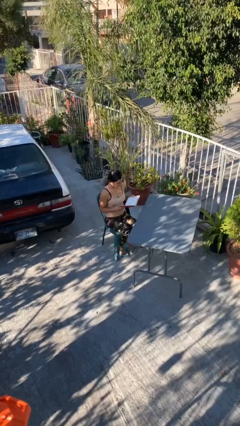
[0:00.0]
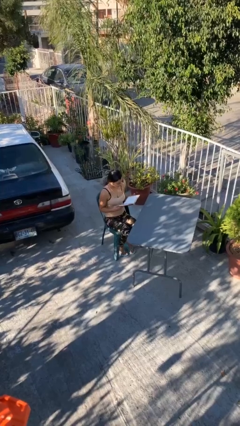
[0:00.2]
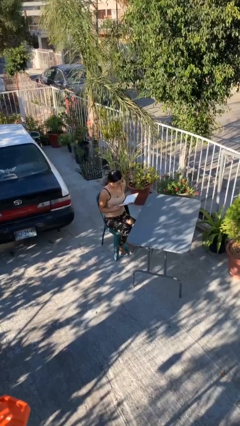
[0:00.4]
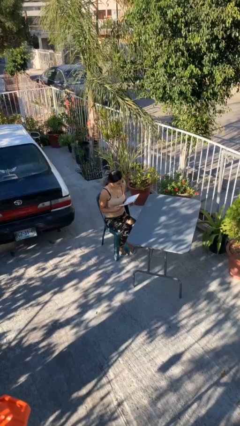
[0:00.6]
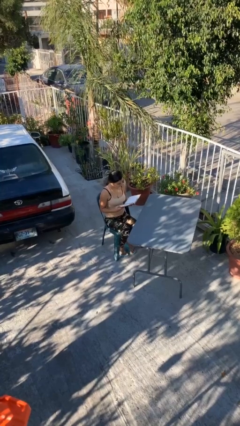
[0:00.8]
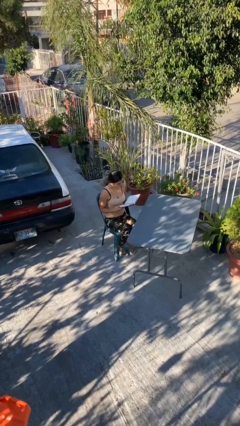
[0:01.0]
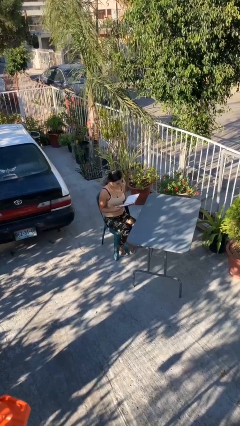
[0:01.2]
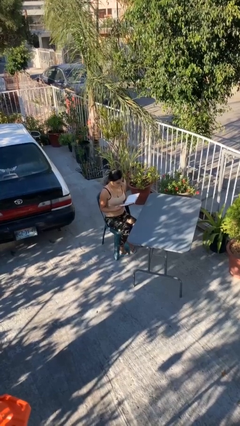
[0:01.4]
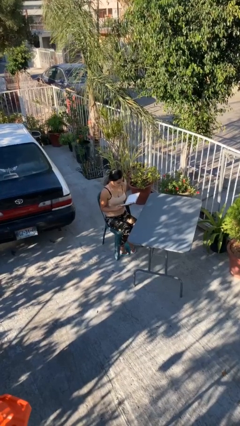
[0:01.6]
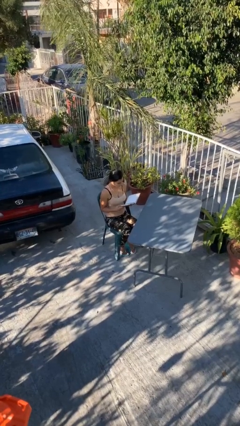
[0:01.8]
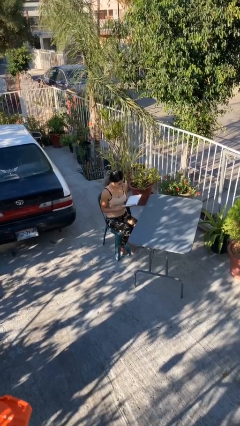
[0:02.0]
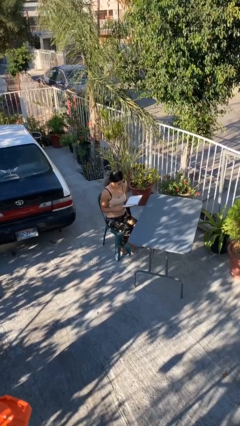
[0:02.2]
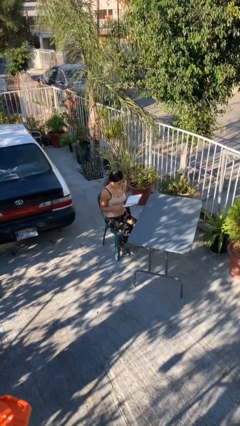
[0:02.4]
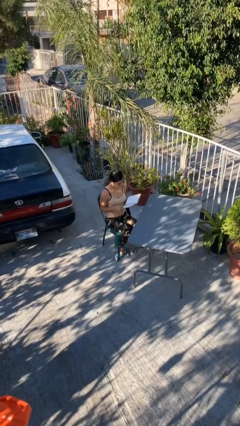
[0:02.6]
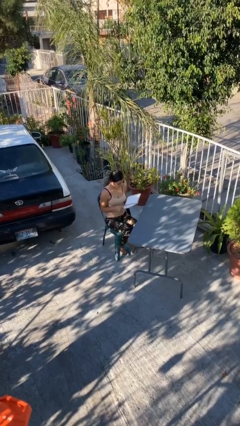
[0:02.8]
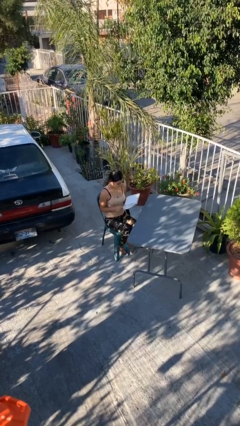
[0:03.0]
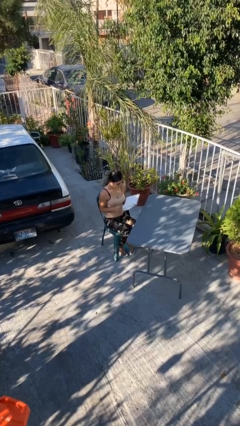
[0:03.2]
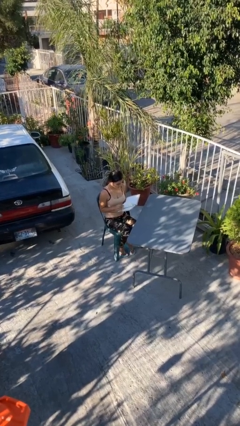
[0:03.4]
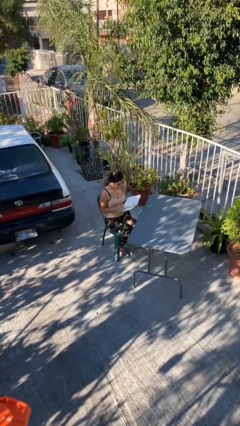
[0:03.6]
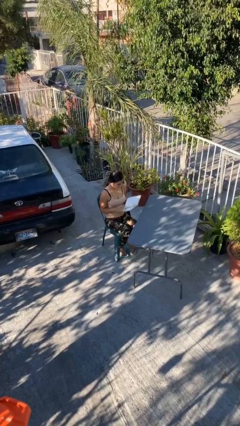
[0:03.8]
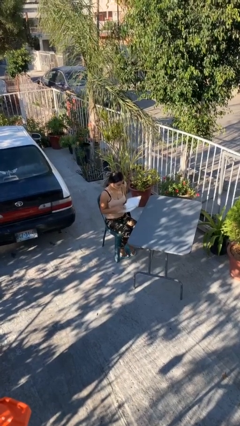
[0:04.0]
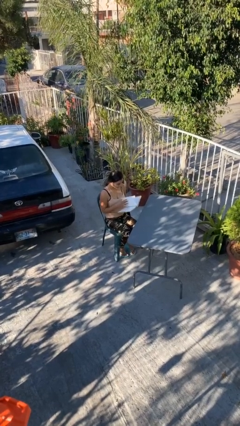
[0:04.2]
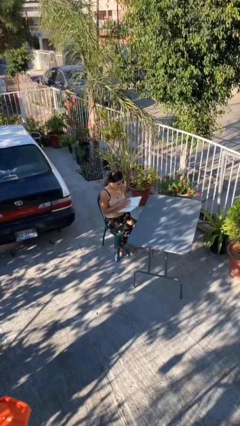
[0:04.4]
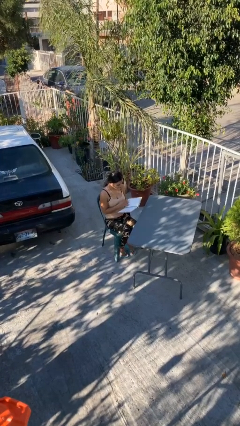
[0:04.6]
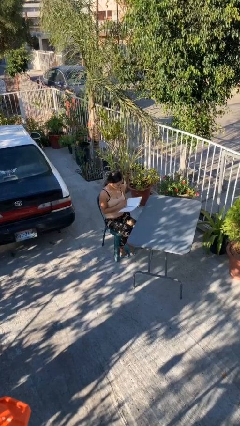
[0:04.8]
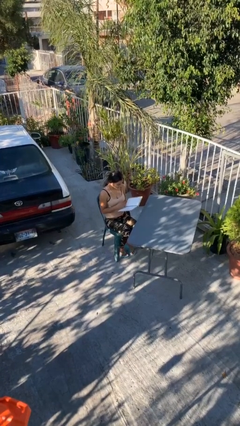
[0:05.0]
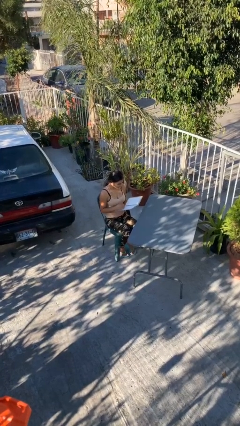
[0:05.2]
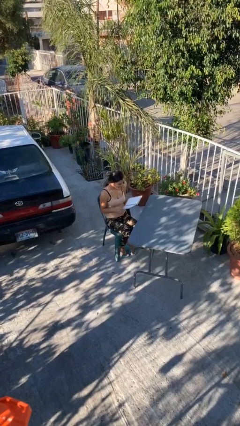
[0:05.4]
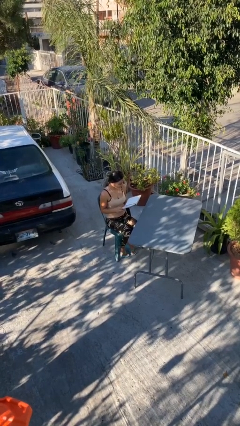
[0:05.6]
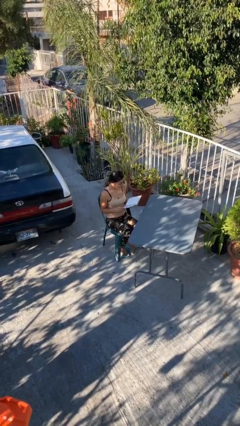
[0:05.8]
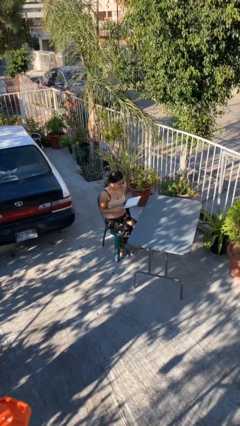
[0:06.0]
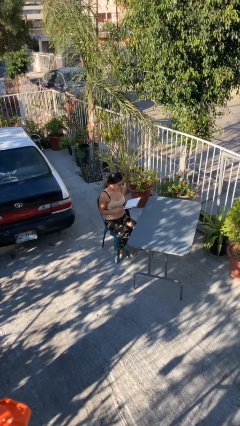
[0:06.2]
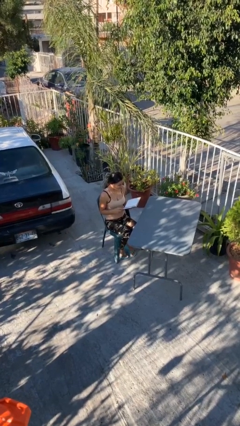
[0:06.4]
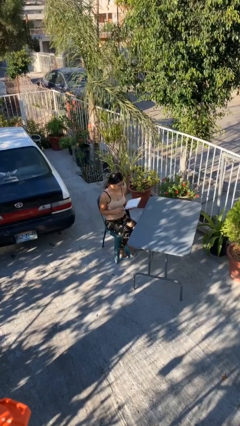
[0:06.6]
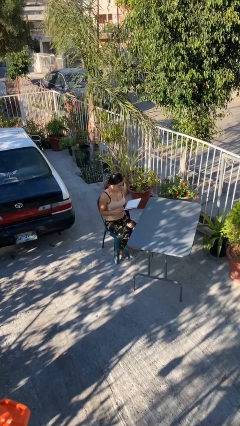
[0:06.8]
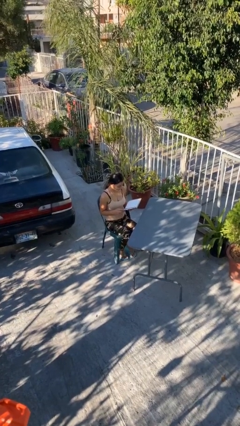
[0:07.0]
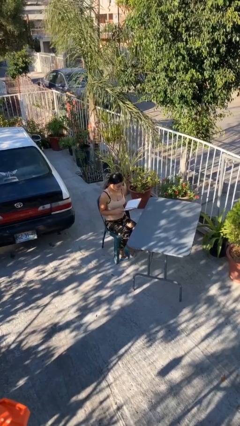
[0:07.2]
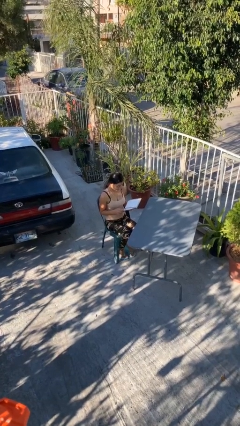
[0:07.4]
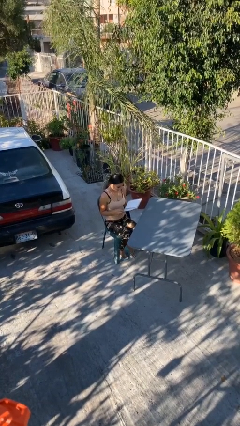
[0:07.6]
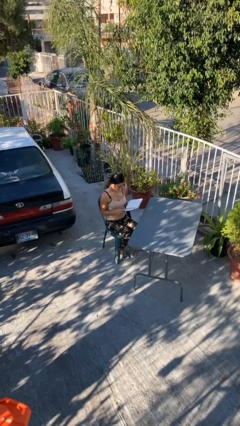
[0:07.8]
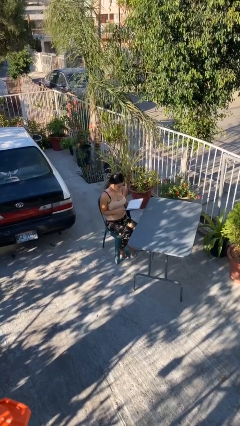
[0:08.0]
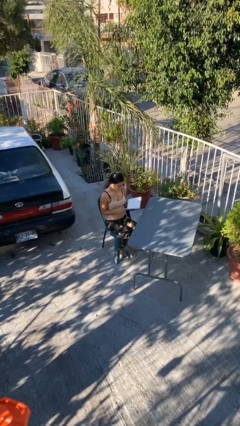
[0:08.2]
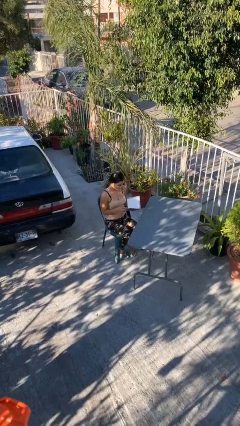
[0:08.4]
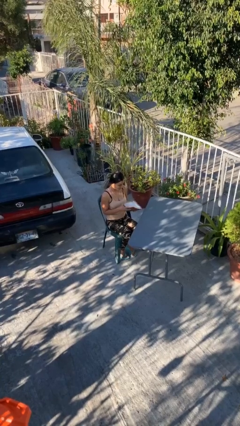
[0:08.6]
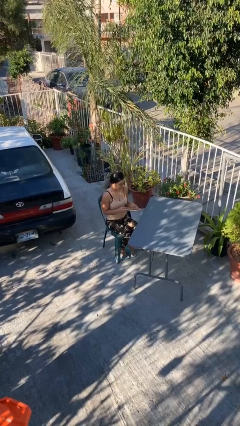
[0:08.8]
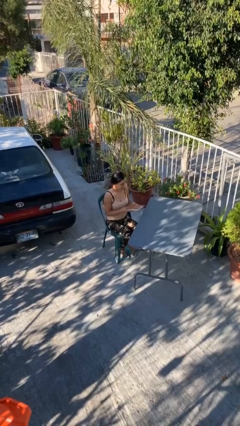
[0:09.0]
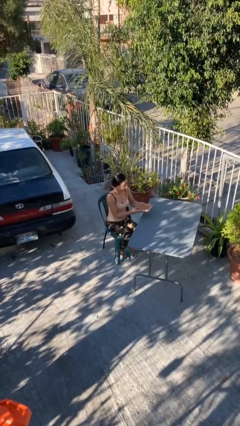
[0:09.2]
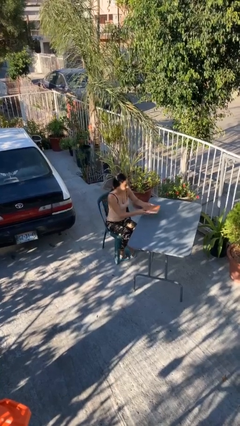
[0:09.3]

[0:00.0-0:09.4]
person reads document

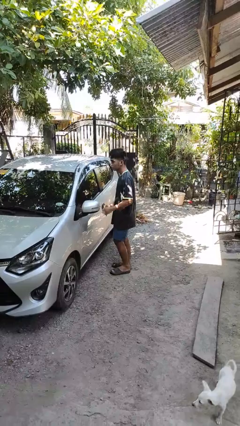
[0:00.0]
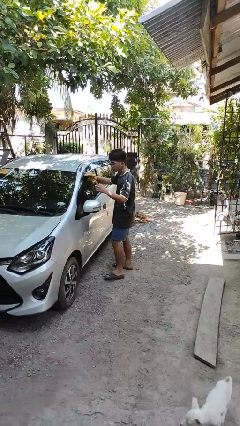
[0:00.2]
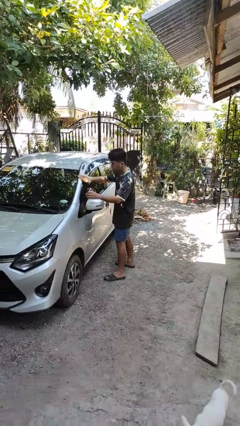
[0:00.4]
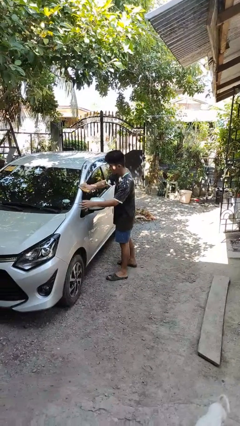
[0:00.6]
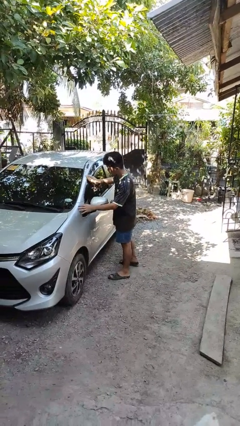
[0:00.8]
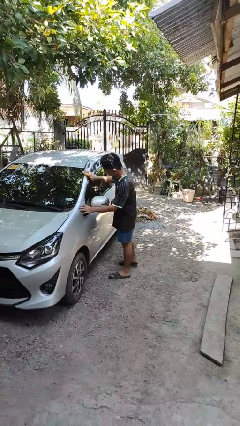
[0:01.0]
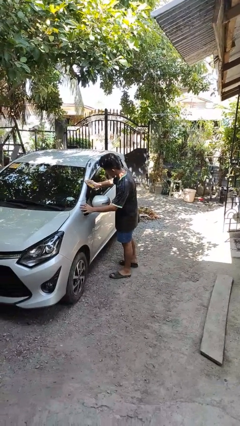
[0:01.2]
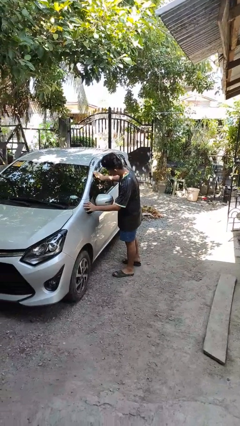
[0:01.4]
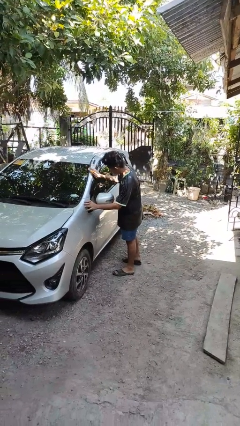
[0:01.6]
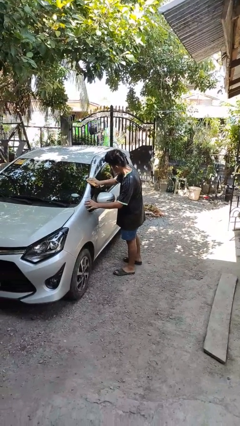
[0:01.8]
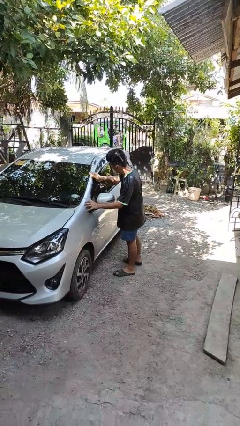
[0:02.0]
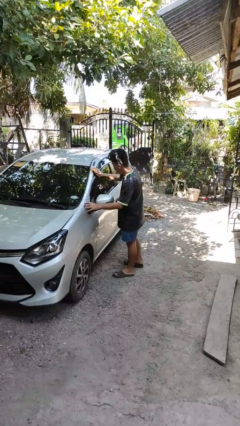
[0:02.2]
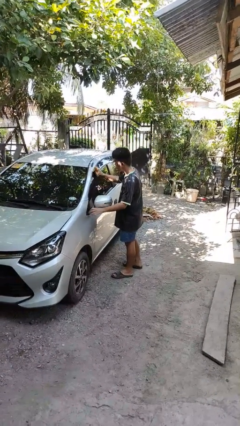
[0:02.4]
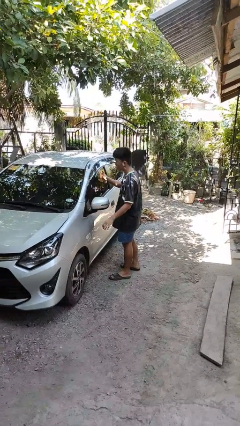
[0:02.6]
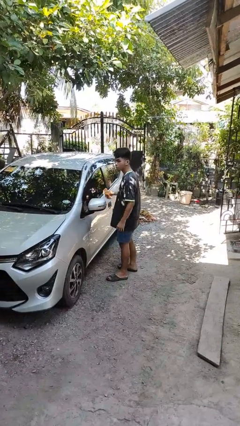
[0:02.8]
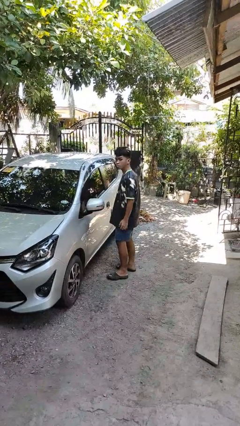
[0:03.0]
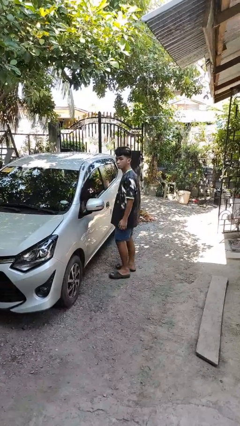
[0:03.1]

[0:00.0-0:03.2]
person polishes car with rag

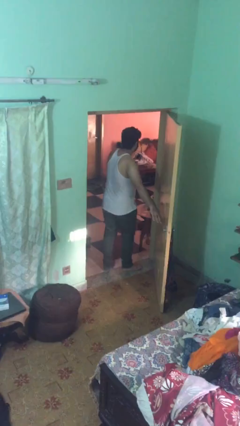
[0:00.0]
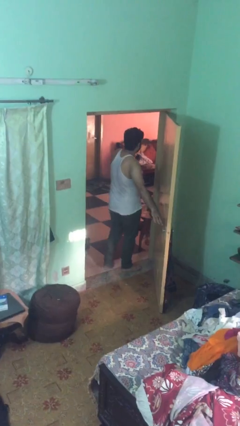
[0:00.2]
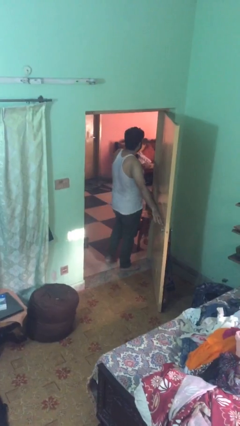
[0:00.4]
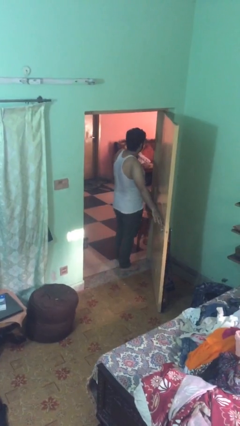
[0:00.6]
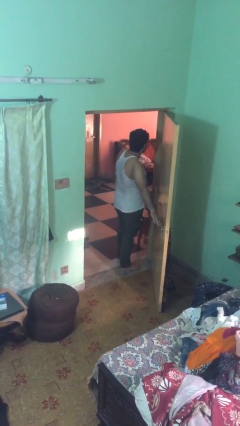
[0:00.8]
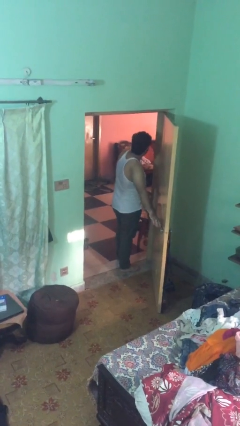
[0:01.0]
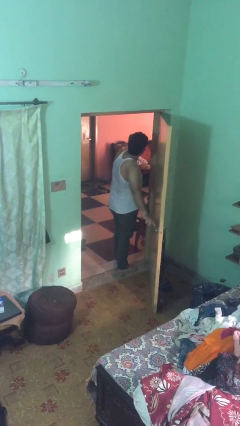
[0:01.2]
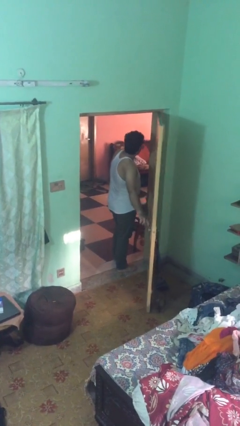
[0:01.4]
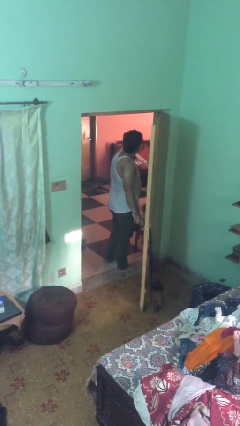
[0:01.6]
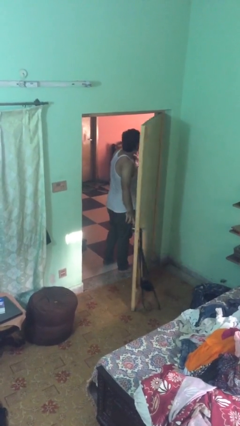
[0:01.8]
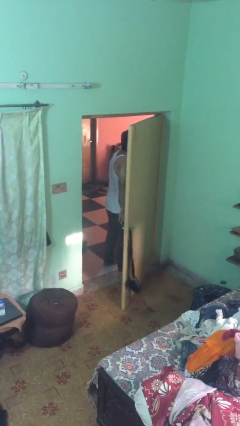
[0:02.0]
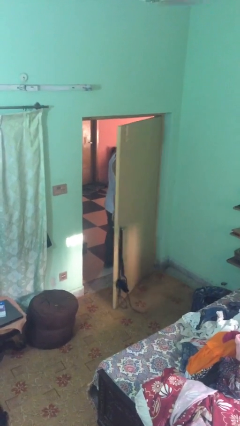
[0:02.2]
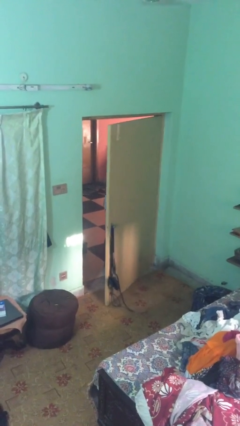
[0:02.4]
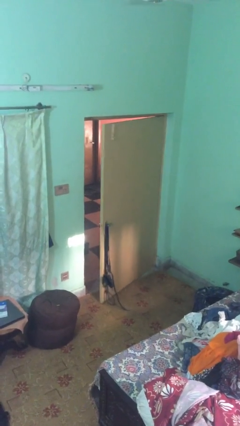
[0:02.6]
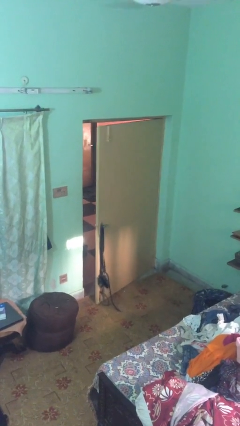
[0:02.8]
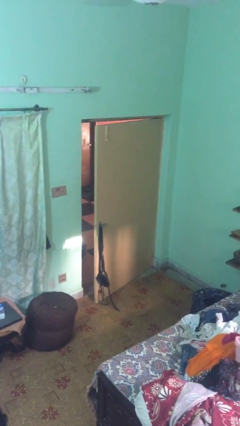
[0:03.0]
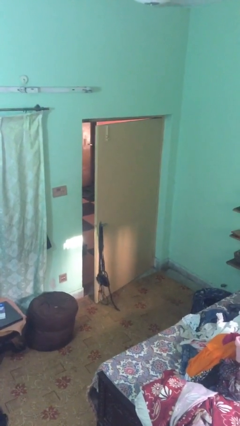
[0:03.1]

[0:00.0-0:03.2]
person closes facility door

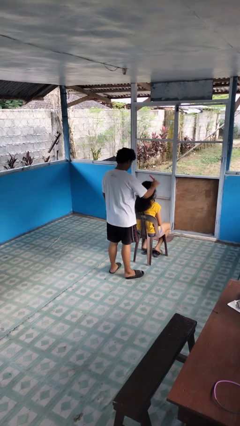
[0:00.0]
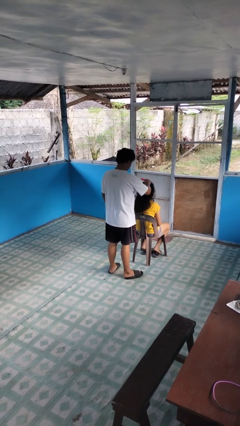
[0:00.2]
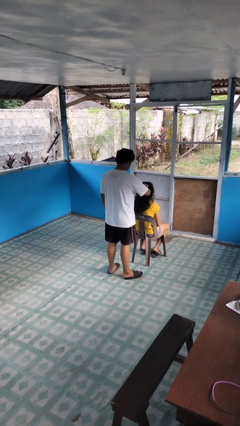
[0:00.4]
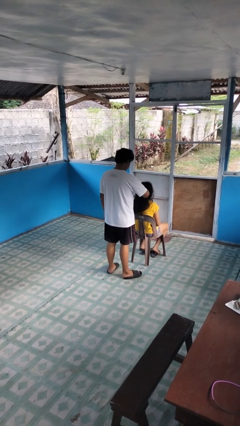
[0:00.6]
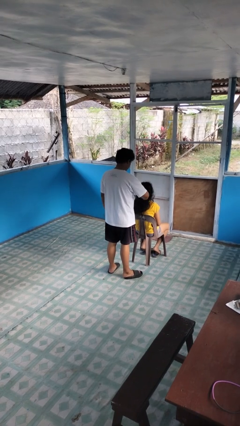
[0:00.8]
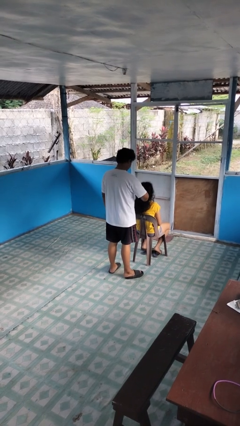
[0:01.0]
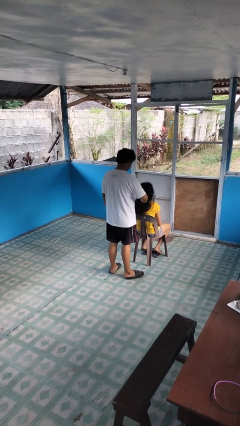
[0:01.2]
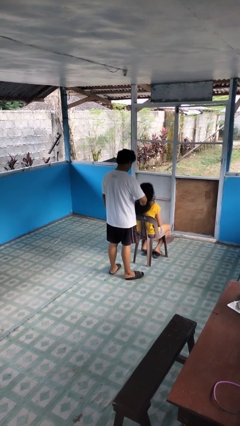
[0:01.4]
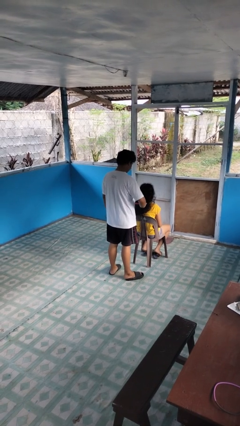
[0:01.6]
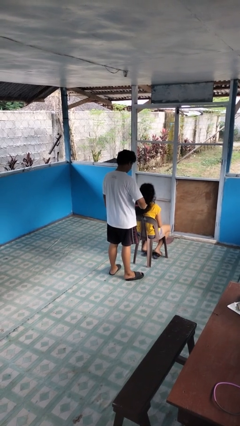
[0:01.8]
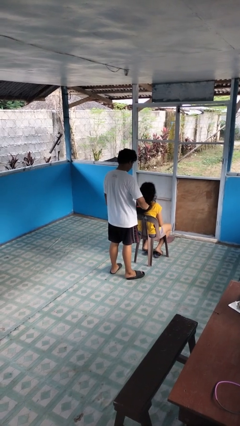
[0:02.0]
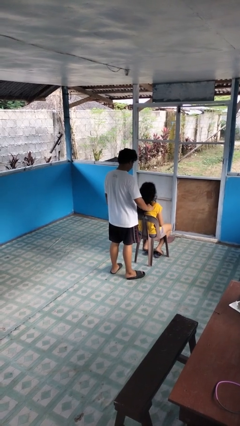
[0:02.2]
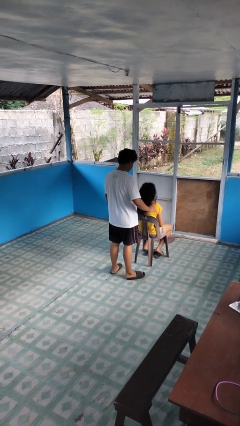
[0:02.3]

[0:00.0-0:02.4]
person brushes hair of person
